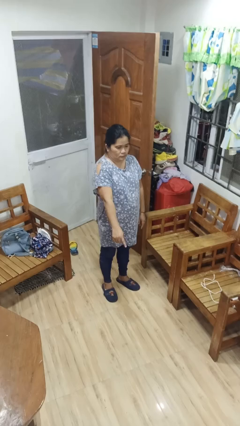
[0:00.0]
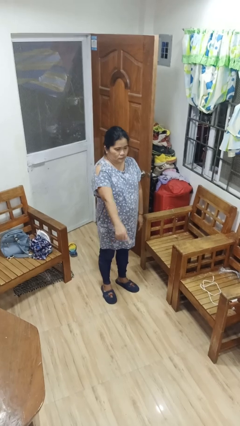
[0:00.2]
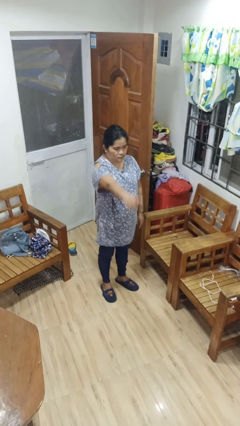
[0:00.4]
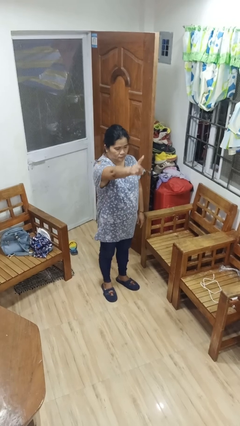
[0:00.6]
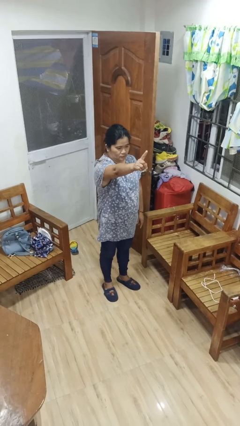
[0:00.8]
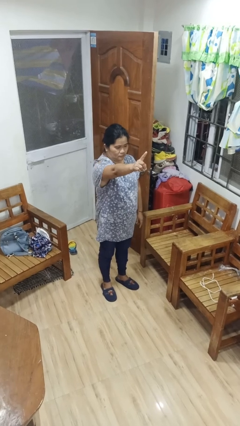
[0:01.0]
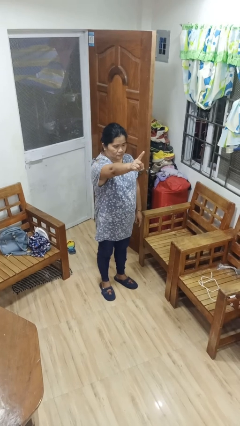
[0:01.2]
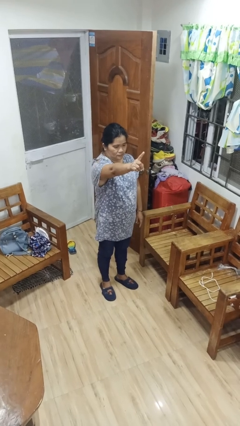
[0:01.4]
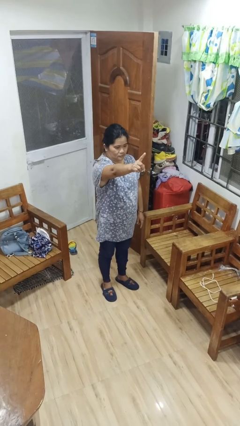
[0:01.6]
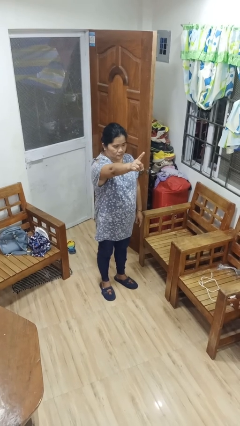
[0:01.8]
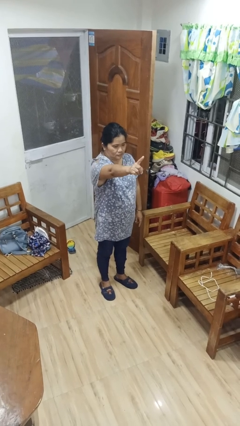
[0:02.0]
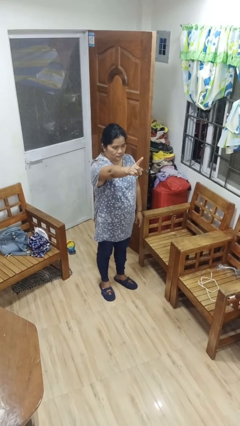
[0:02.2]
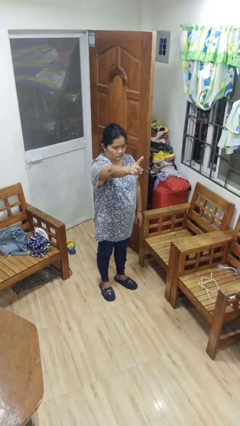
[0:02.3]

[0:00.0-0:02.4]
person gestures number one

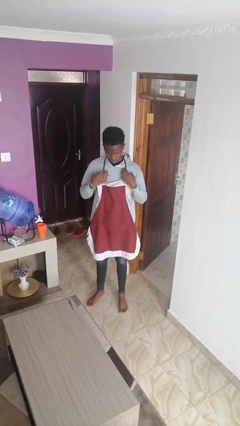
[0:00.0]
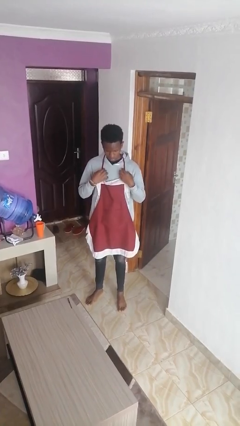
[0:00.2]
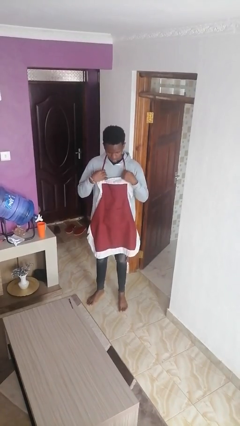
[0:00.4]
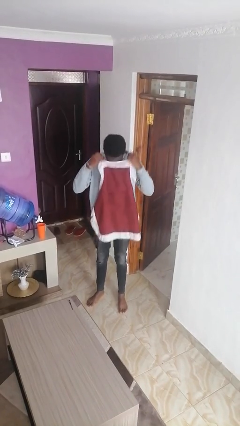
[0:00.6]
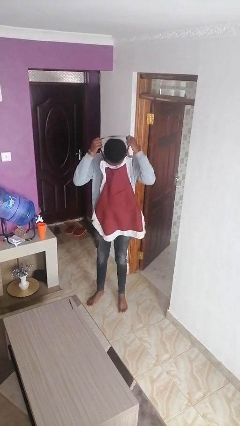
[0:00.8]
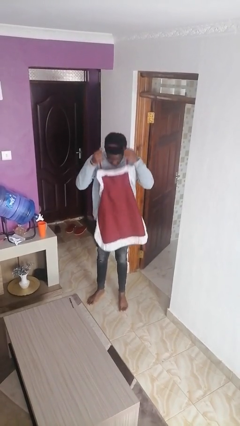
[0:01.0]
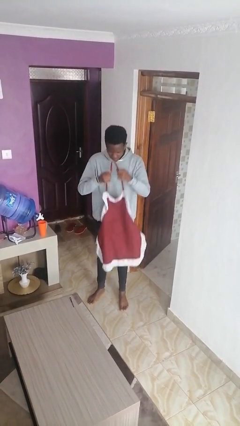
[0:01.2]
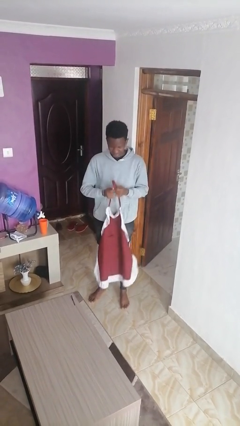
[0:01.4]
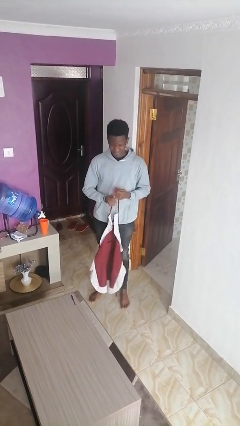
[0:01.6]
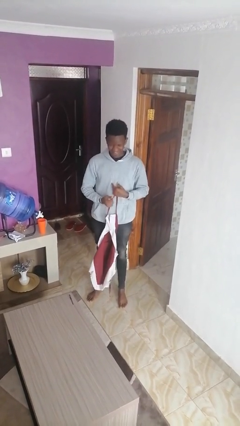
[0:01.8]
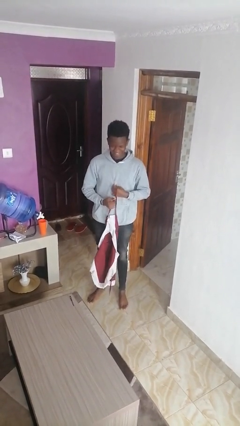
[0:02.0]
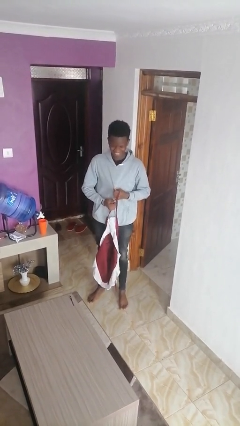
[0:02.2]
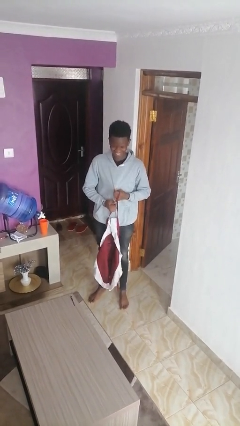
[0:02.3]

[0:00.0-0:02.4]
person takes off apron

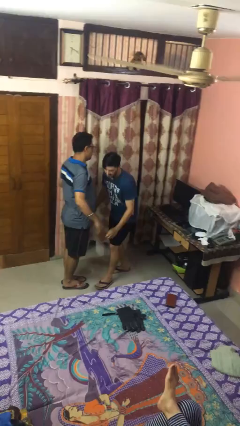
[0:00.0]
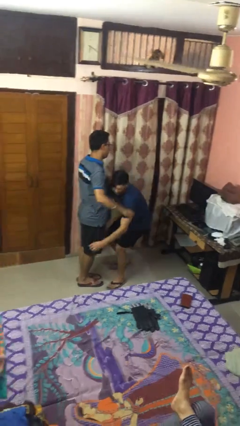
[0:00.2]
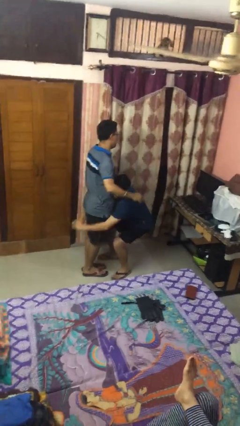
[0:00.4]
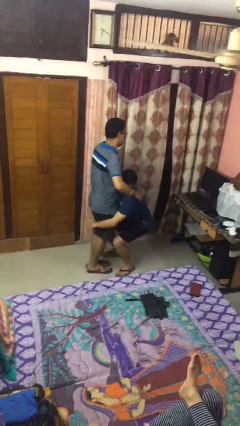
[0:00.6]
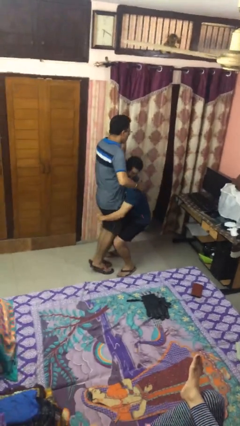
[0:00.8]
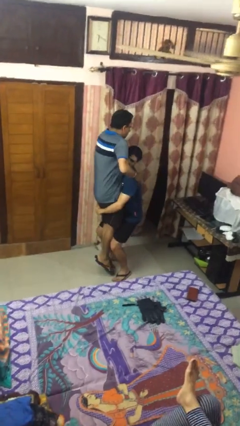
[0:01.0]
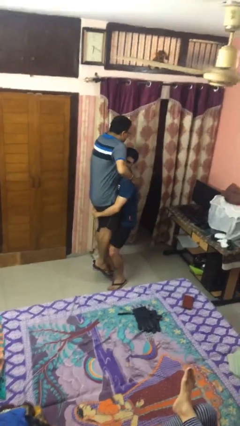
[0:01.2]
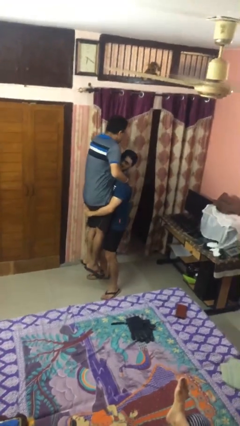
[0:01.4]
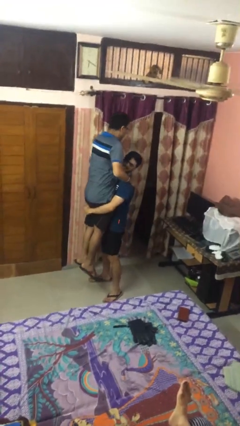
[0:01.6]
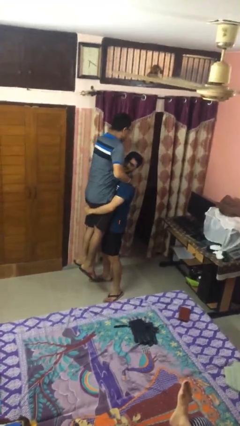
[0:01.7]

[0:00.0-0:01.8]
person picks up person

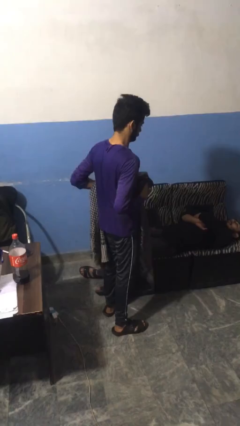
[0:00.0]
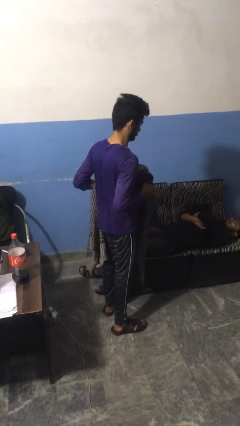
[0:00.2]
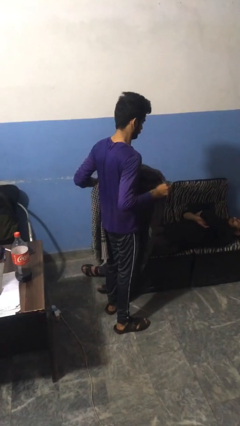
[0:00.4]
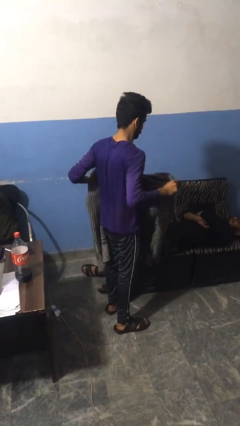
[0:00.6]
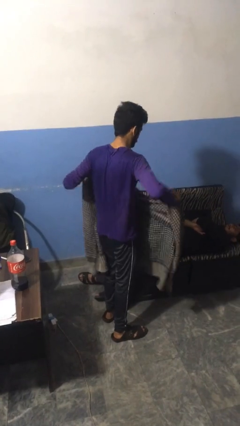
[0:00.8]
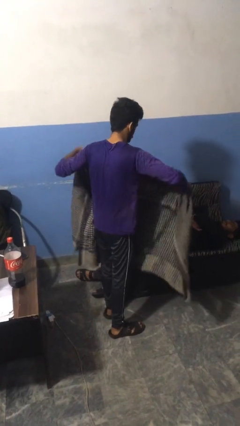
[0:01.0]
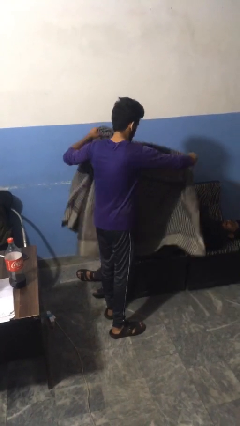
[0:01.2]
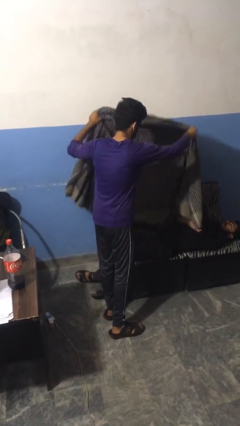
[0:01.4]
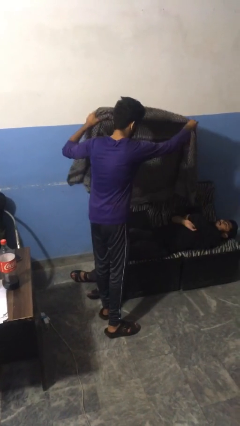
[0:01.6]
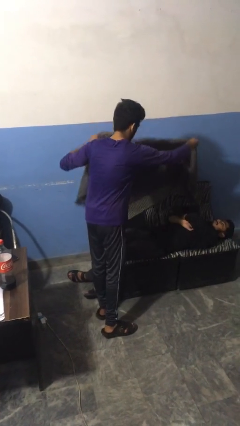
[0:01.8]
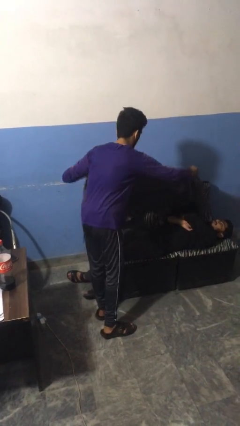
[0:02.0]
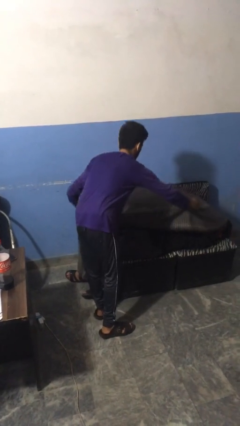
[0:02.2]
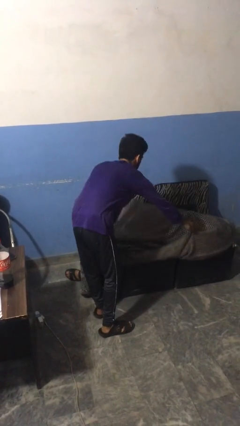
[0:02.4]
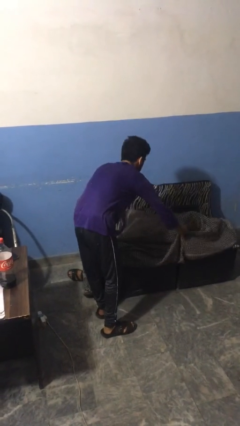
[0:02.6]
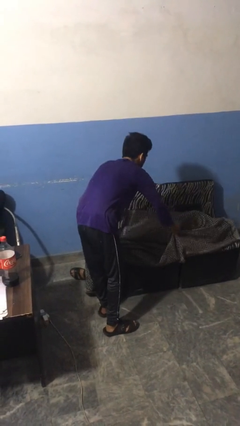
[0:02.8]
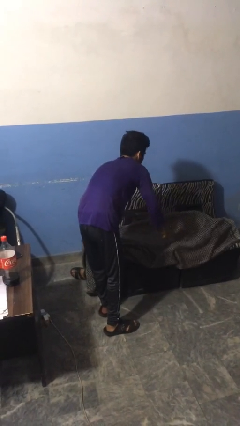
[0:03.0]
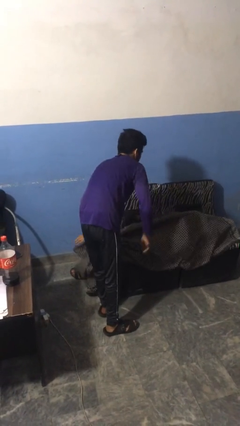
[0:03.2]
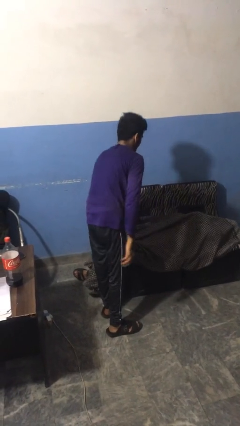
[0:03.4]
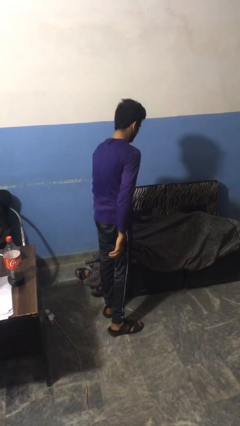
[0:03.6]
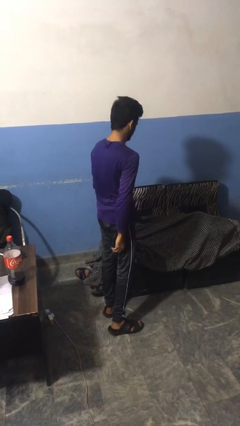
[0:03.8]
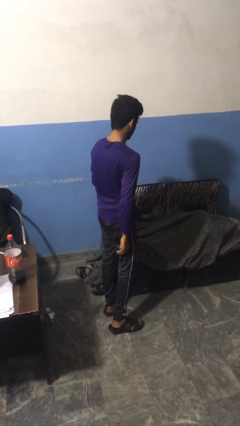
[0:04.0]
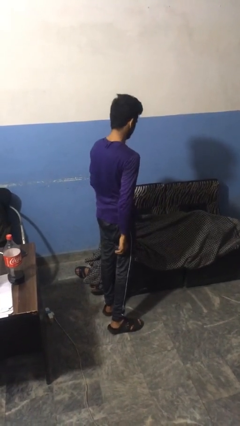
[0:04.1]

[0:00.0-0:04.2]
person covers friend with blanket

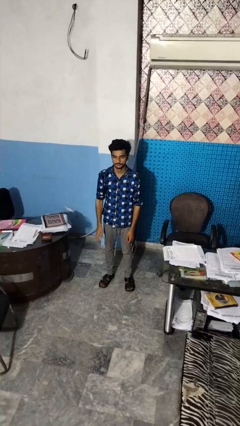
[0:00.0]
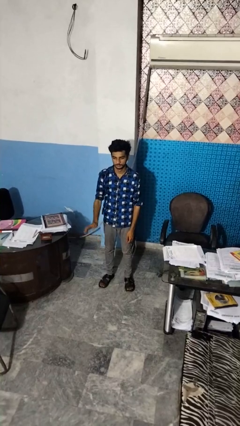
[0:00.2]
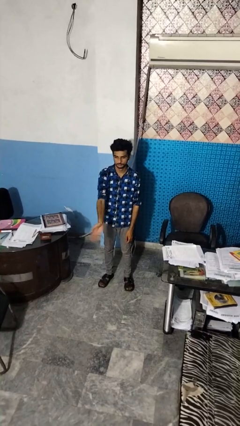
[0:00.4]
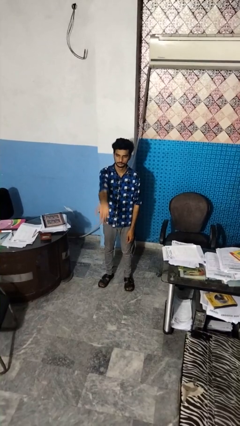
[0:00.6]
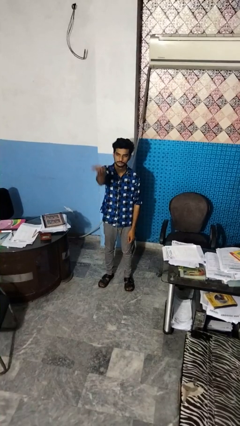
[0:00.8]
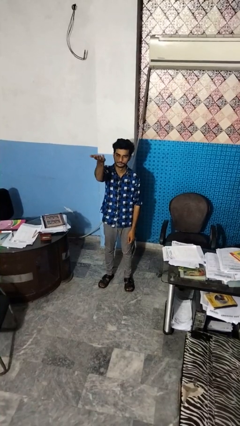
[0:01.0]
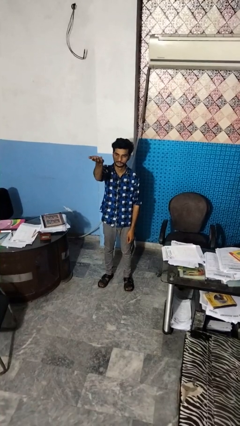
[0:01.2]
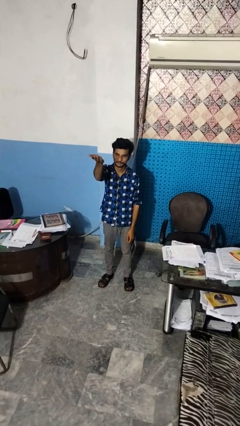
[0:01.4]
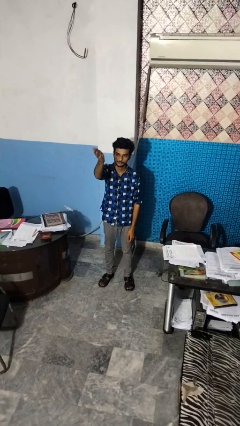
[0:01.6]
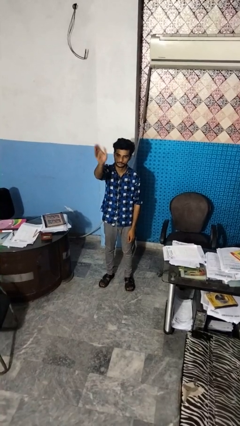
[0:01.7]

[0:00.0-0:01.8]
person gestures swipe up

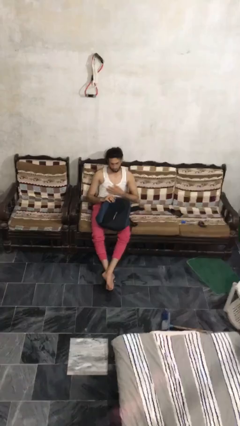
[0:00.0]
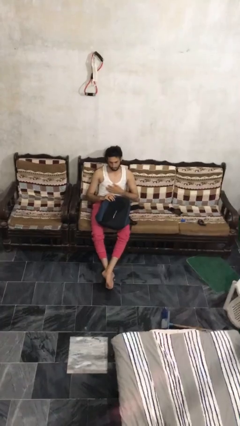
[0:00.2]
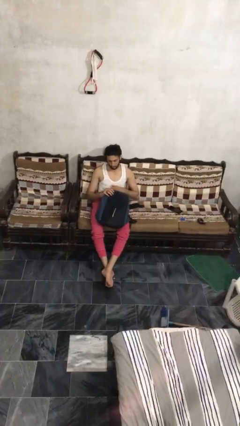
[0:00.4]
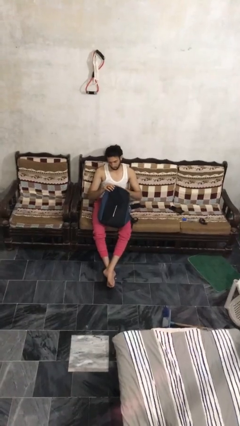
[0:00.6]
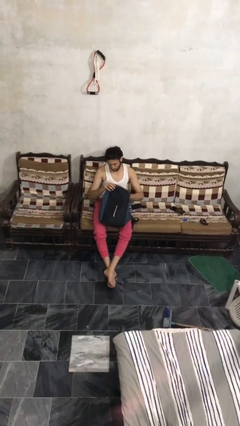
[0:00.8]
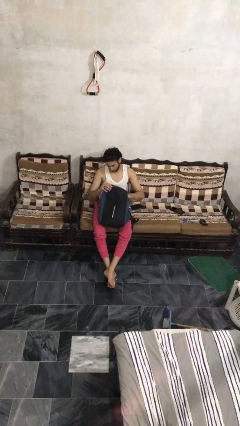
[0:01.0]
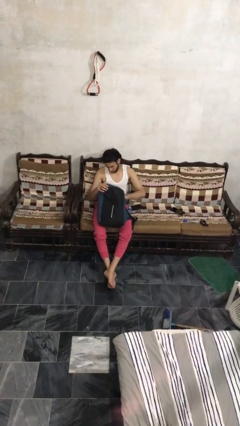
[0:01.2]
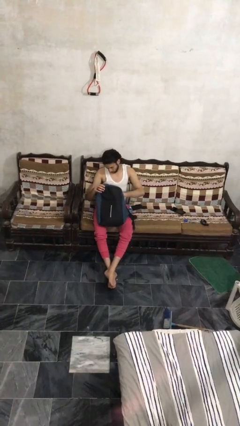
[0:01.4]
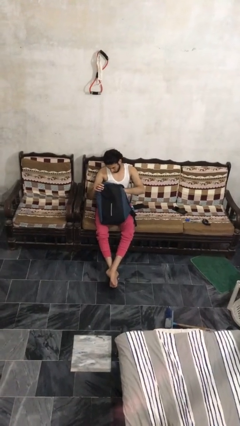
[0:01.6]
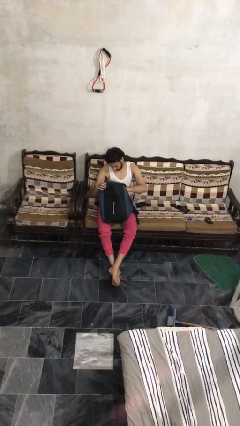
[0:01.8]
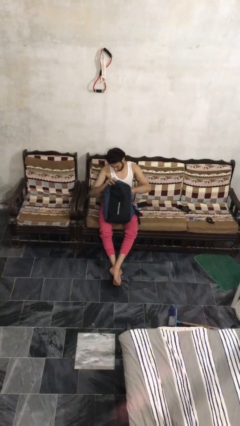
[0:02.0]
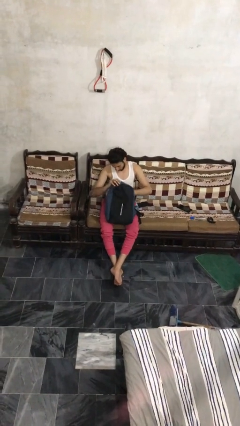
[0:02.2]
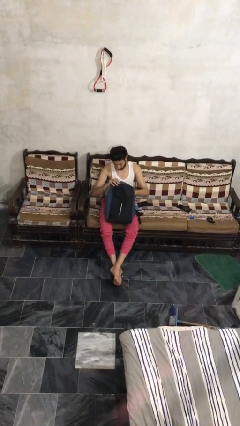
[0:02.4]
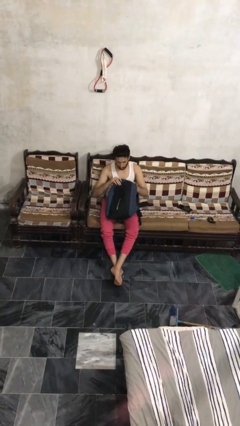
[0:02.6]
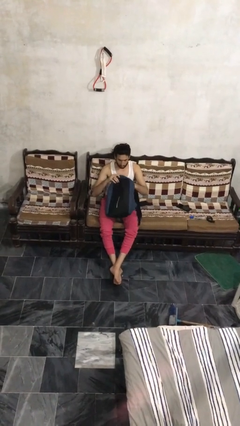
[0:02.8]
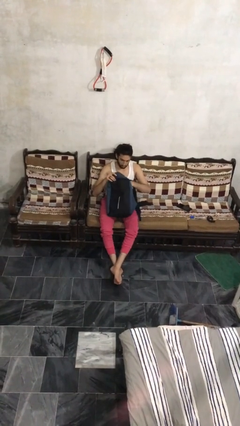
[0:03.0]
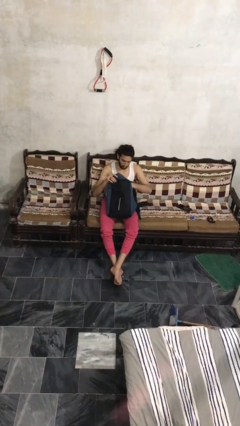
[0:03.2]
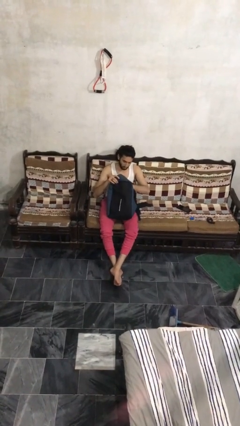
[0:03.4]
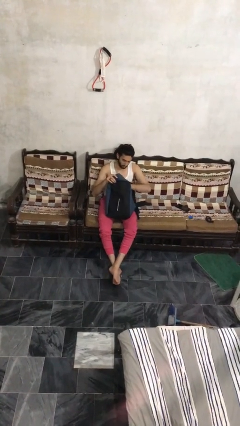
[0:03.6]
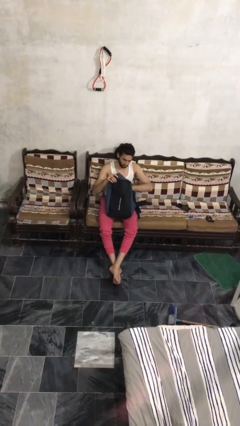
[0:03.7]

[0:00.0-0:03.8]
person searches in backpack

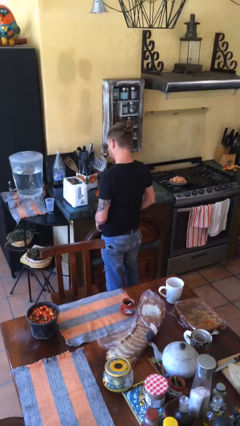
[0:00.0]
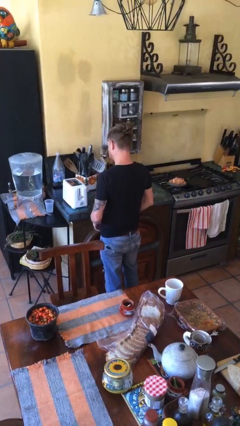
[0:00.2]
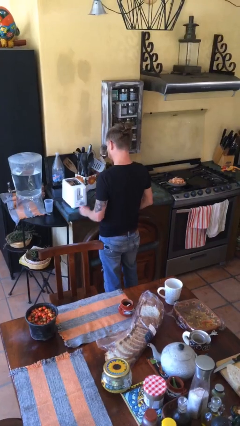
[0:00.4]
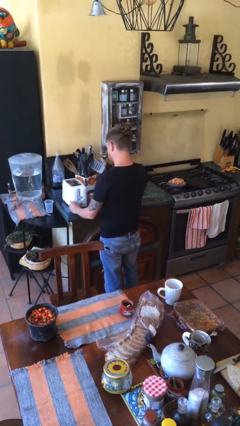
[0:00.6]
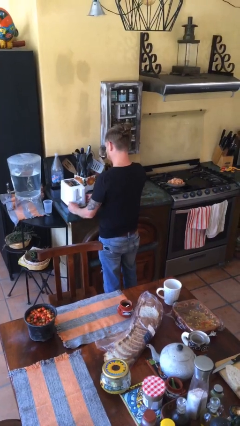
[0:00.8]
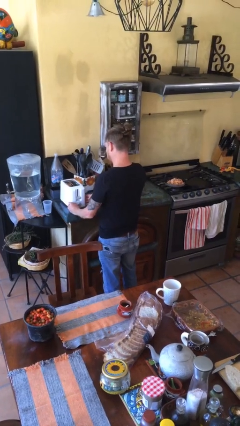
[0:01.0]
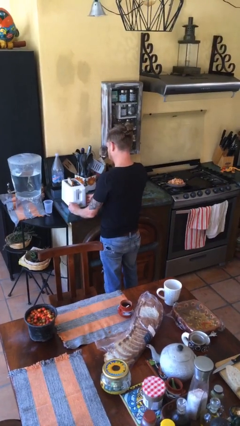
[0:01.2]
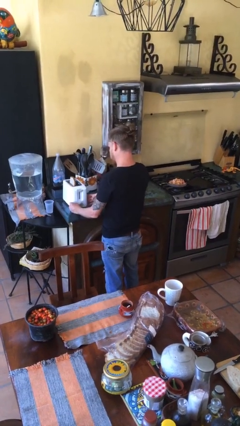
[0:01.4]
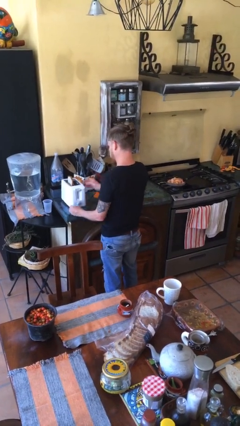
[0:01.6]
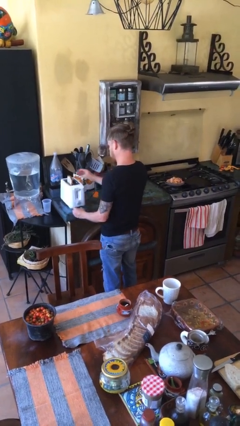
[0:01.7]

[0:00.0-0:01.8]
person takes object from toaster
